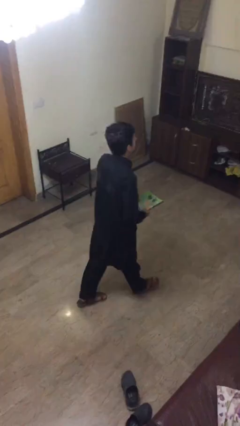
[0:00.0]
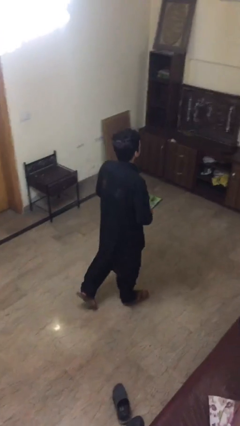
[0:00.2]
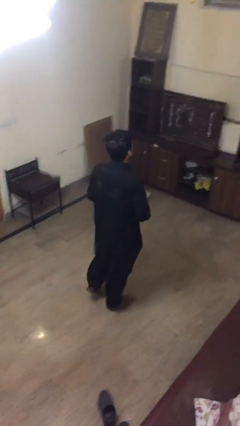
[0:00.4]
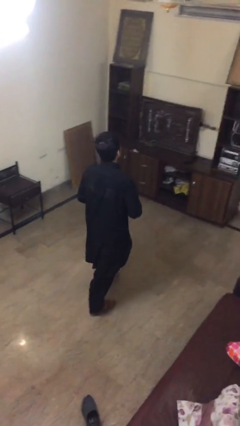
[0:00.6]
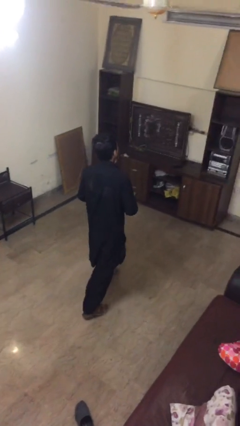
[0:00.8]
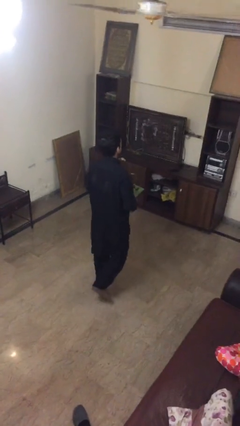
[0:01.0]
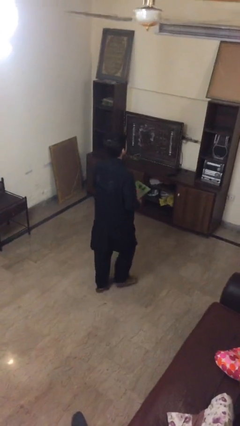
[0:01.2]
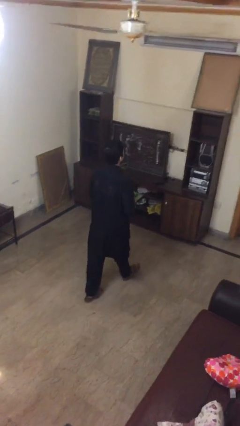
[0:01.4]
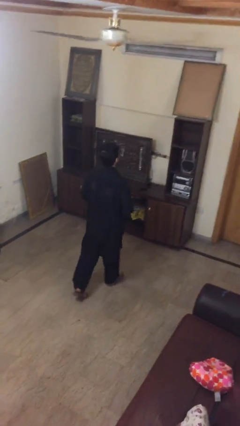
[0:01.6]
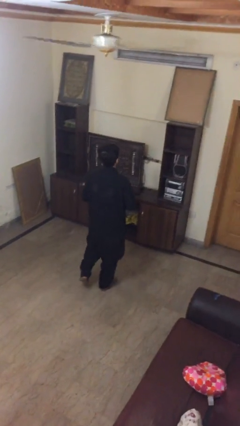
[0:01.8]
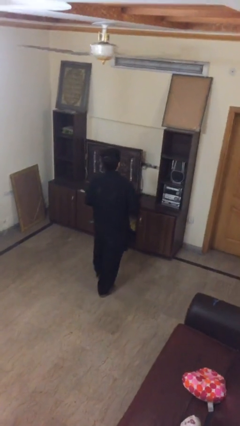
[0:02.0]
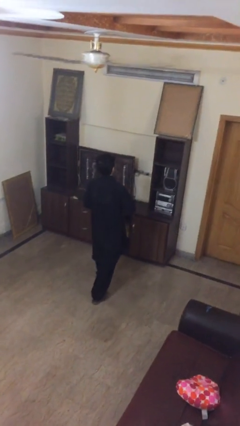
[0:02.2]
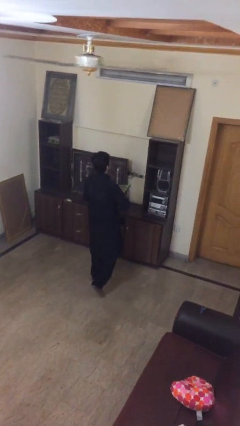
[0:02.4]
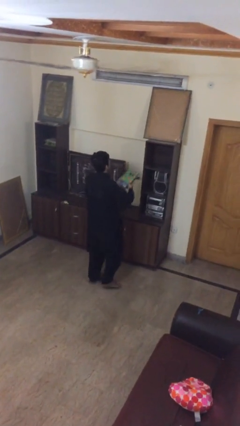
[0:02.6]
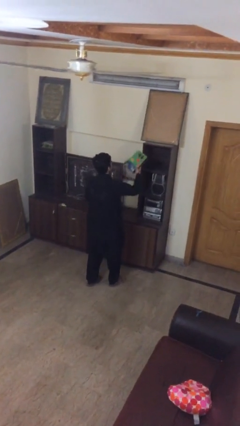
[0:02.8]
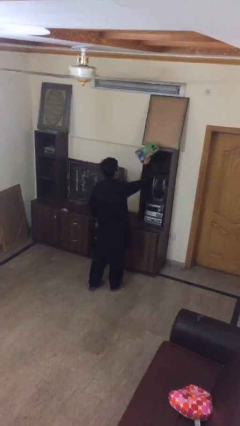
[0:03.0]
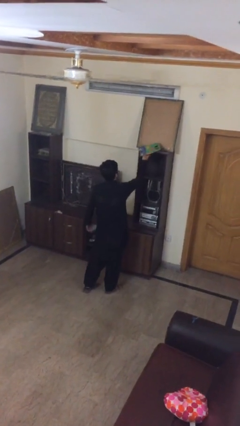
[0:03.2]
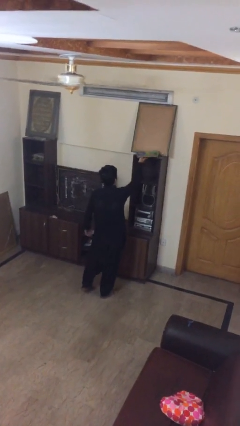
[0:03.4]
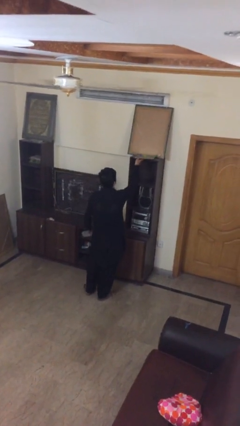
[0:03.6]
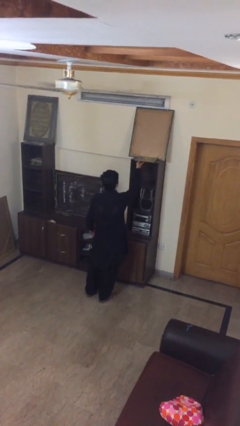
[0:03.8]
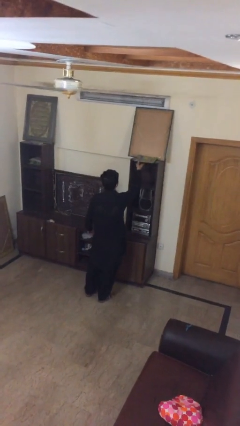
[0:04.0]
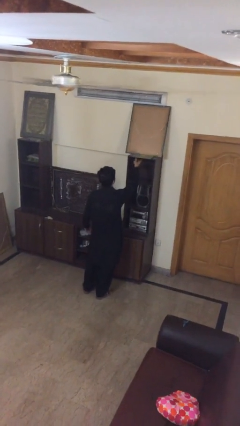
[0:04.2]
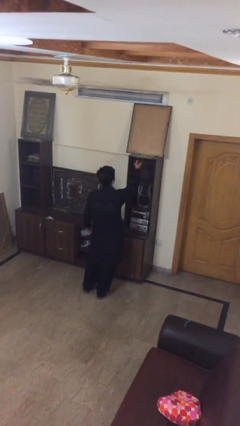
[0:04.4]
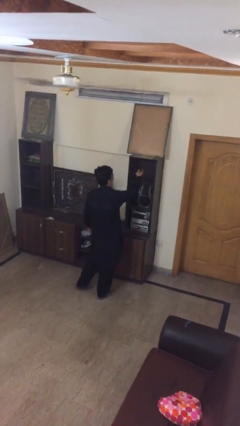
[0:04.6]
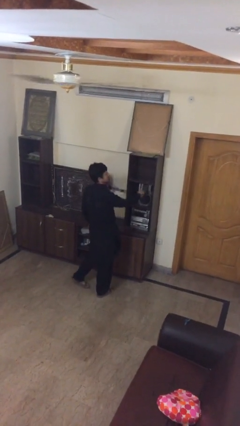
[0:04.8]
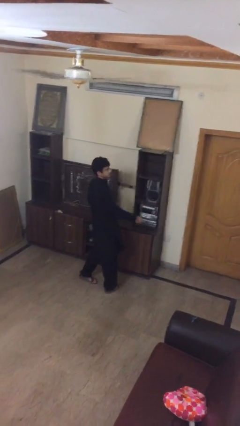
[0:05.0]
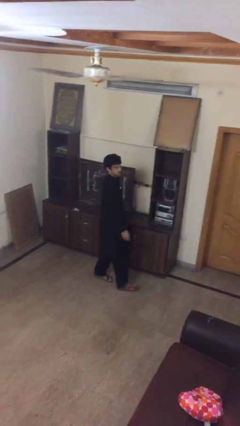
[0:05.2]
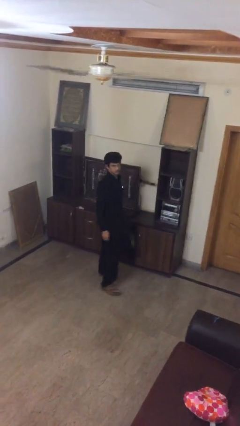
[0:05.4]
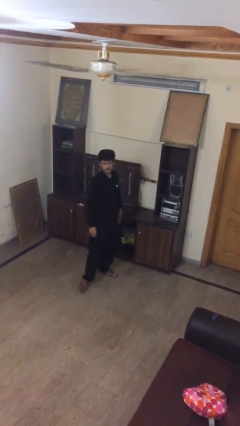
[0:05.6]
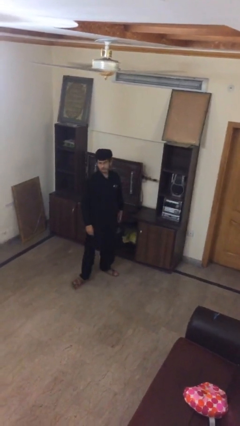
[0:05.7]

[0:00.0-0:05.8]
person puts down object on shelf

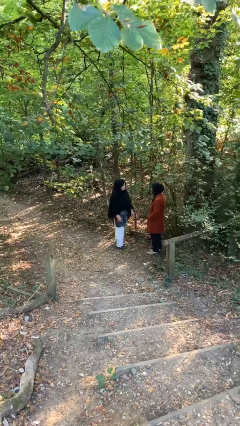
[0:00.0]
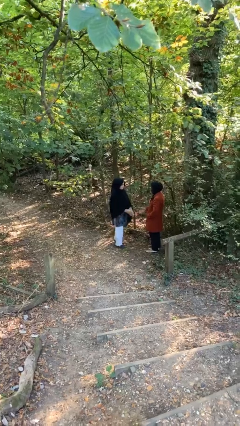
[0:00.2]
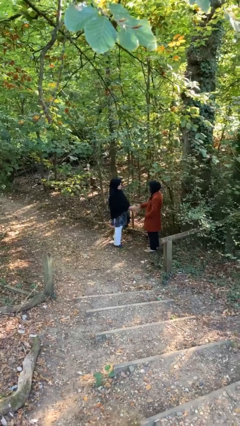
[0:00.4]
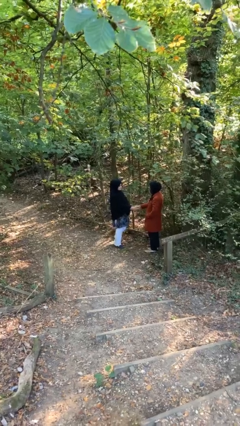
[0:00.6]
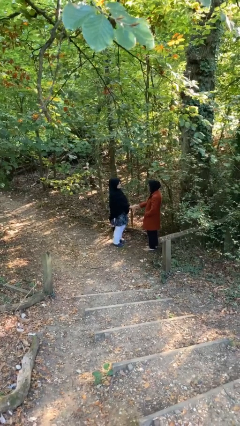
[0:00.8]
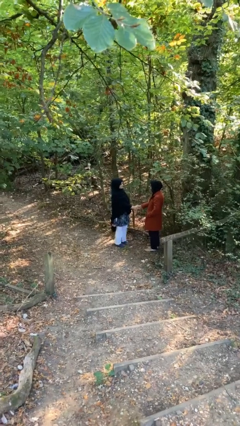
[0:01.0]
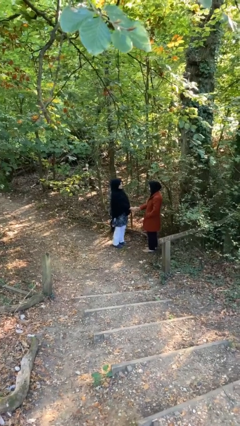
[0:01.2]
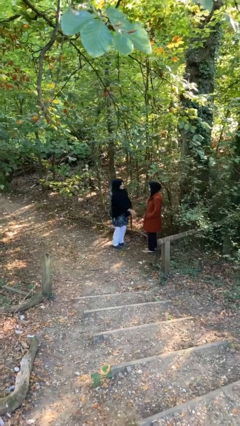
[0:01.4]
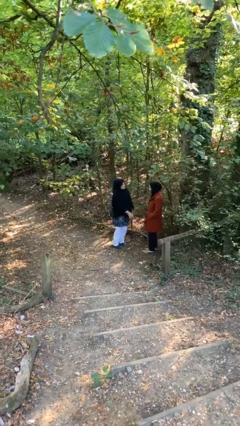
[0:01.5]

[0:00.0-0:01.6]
person shakes hand

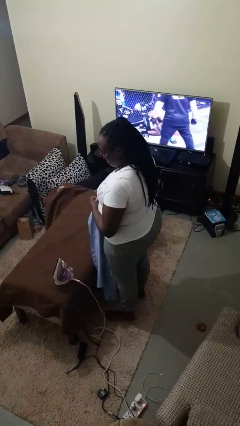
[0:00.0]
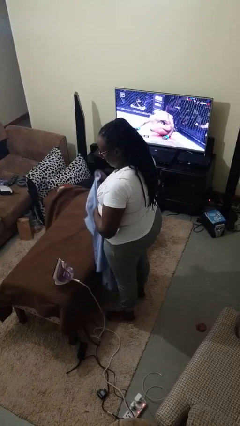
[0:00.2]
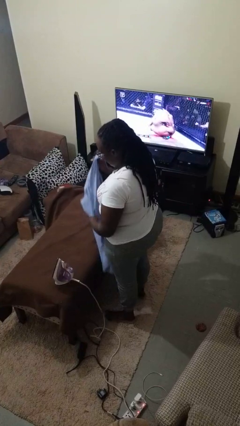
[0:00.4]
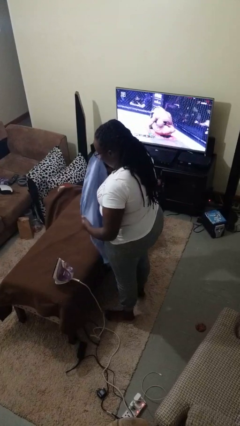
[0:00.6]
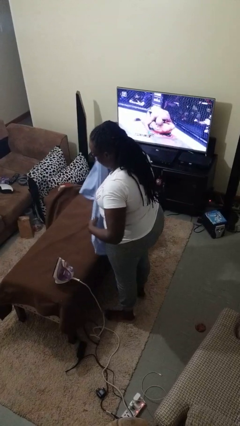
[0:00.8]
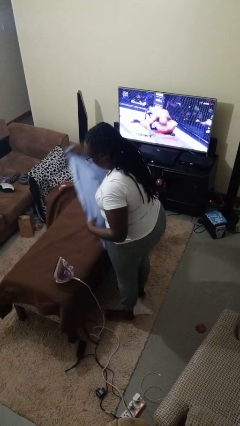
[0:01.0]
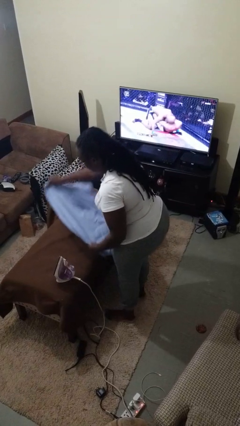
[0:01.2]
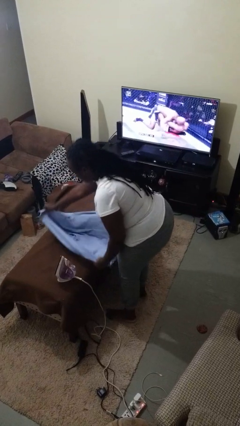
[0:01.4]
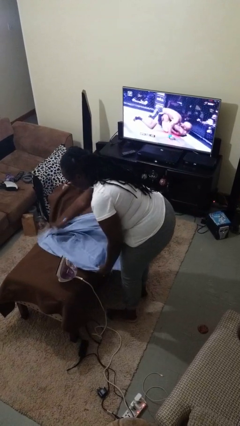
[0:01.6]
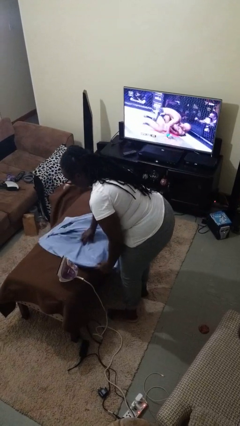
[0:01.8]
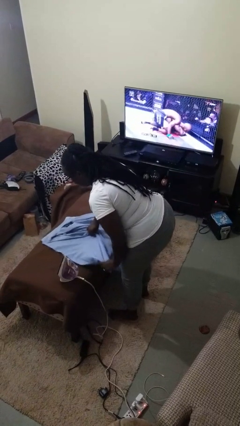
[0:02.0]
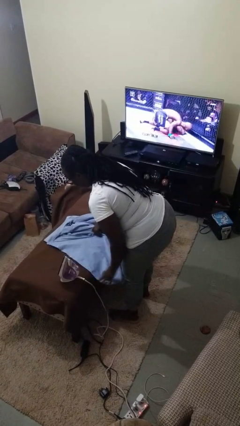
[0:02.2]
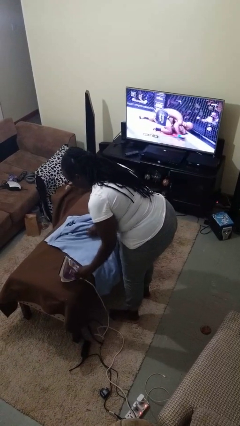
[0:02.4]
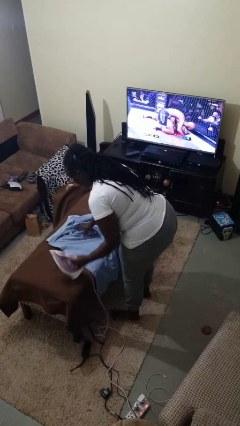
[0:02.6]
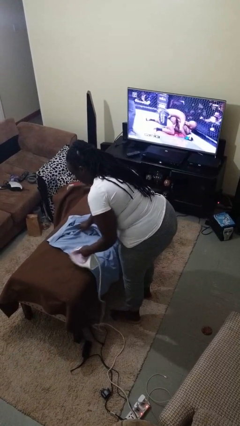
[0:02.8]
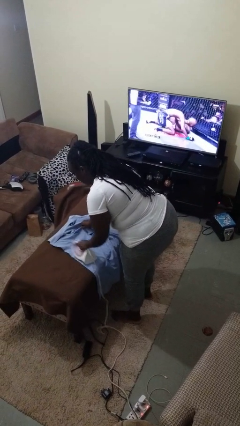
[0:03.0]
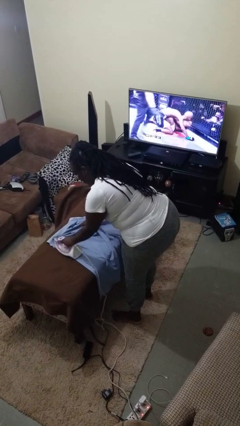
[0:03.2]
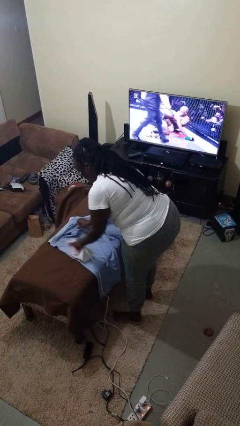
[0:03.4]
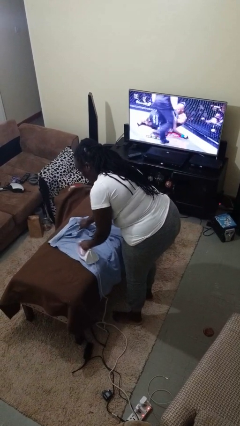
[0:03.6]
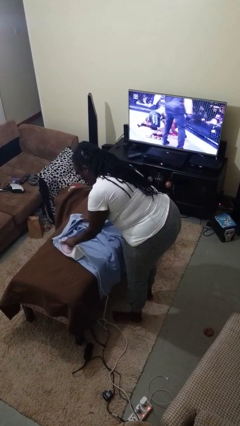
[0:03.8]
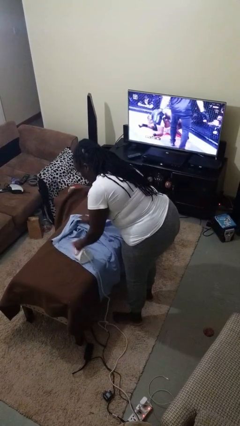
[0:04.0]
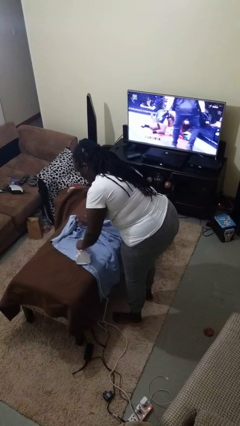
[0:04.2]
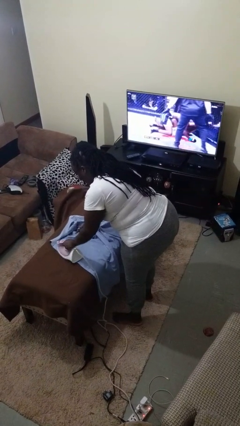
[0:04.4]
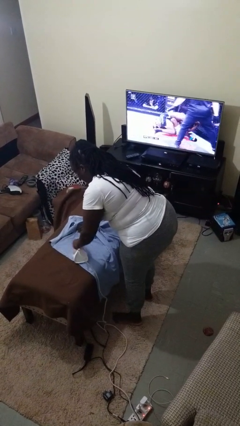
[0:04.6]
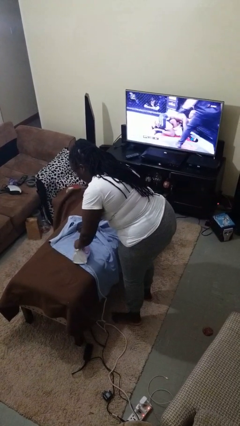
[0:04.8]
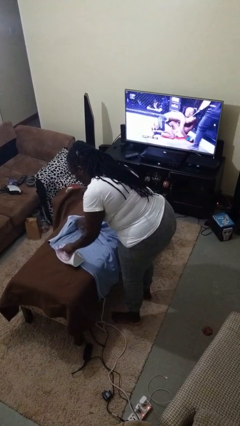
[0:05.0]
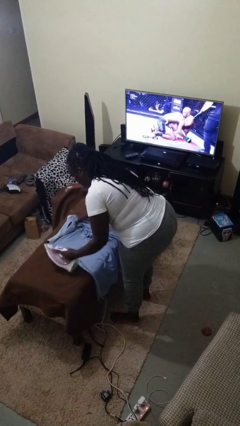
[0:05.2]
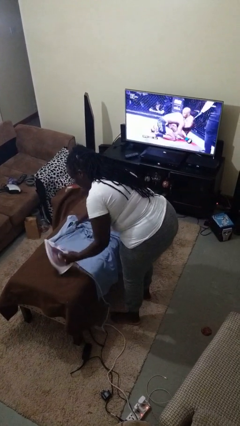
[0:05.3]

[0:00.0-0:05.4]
person irons clothes

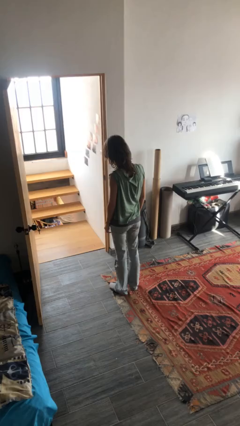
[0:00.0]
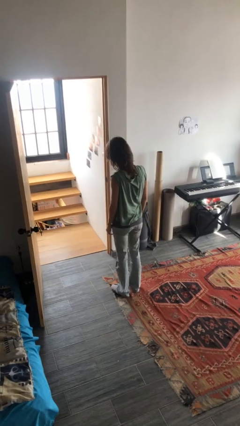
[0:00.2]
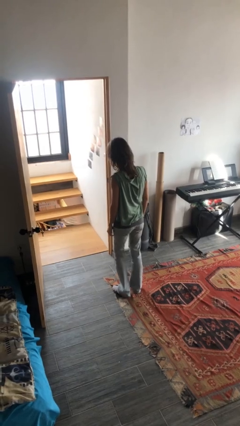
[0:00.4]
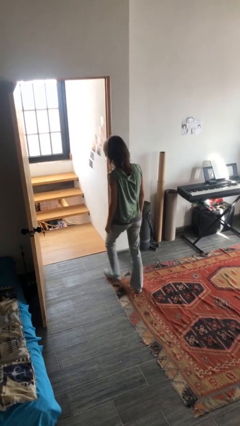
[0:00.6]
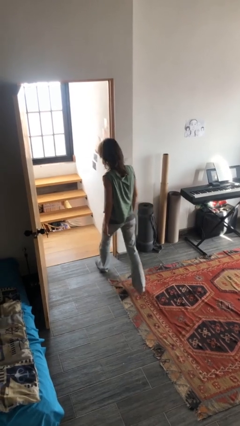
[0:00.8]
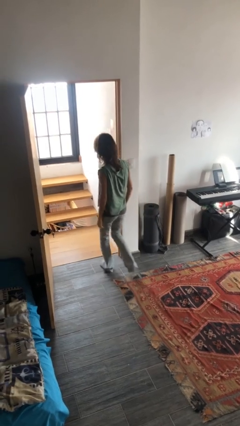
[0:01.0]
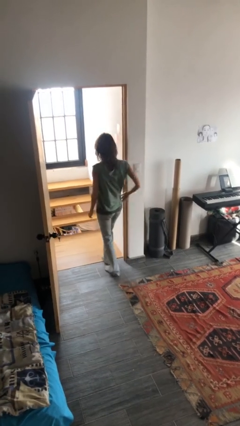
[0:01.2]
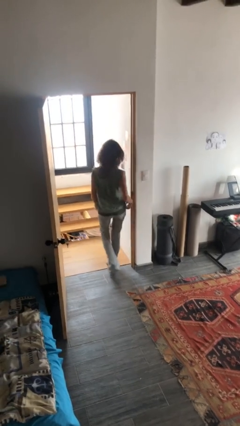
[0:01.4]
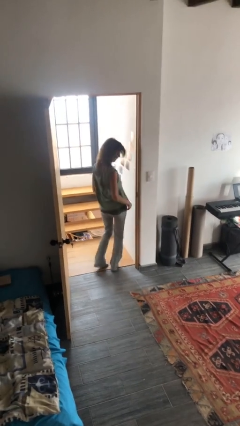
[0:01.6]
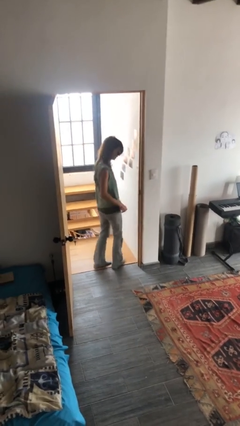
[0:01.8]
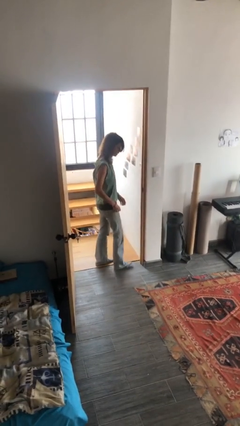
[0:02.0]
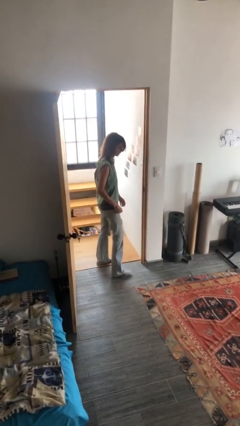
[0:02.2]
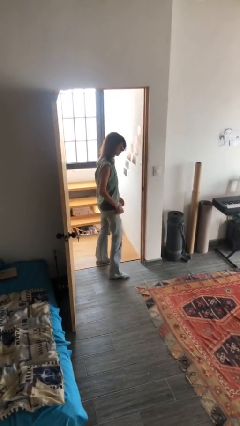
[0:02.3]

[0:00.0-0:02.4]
person bumps into wall

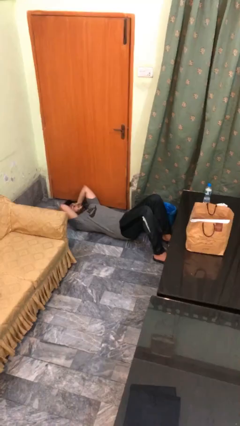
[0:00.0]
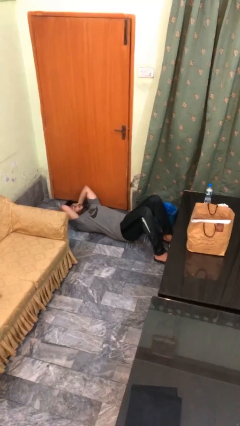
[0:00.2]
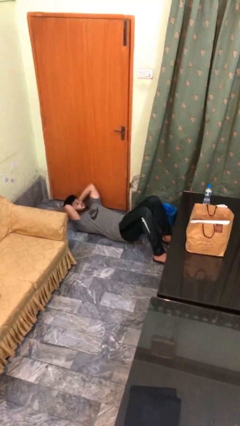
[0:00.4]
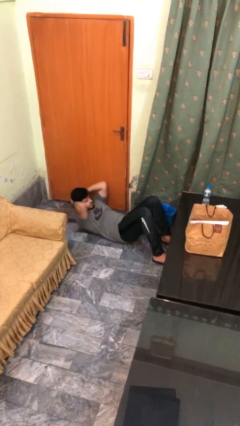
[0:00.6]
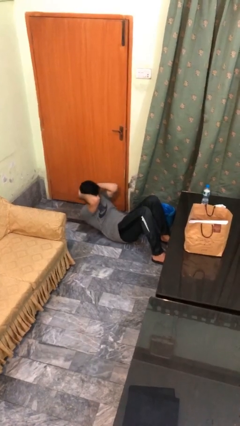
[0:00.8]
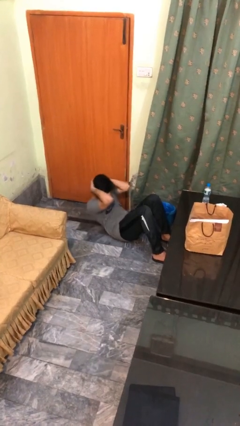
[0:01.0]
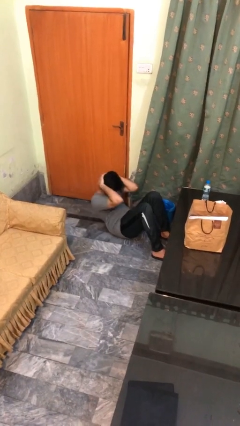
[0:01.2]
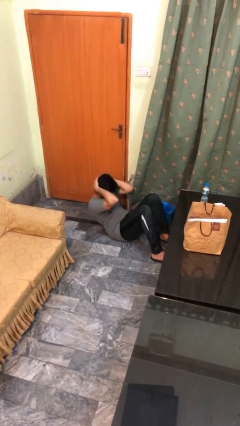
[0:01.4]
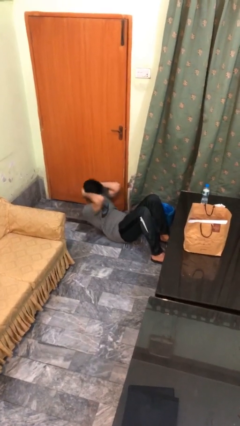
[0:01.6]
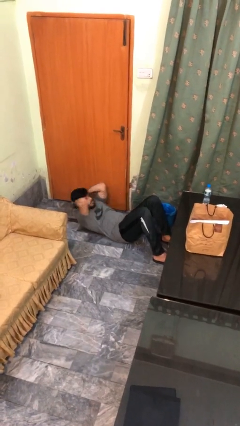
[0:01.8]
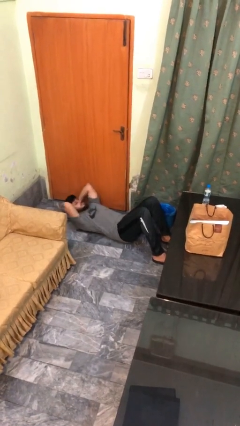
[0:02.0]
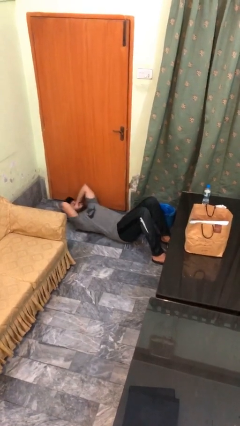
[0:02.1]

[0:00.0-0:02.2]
person exercises with situp
